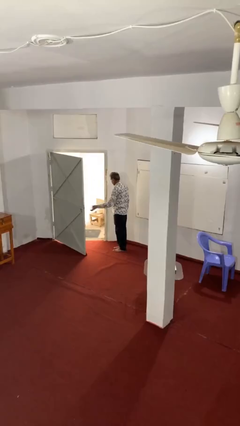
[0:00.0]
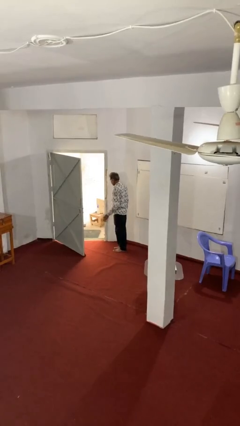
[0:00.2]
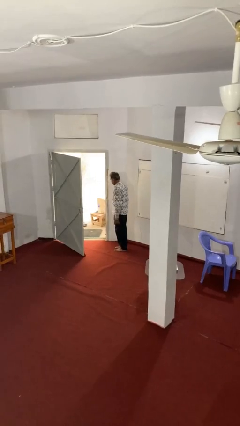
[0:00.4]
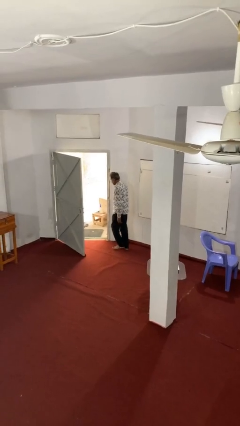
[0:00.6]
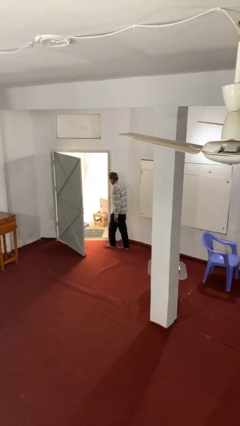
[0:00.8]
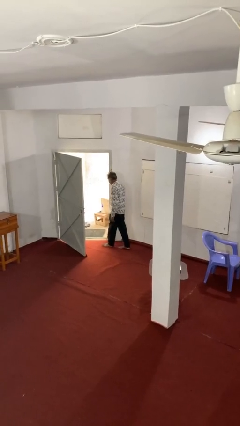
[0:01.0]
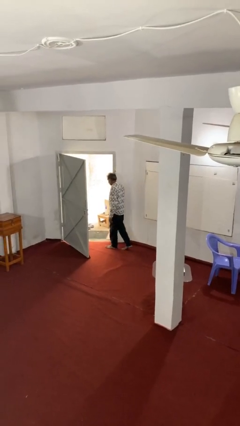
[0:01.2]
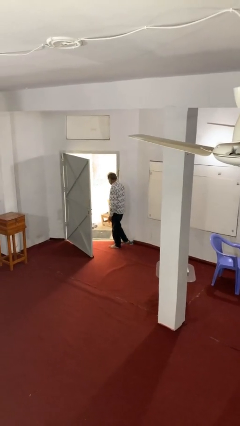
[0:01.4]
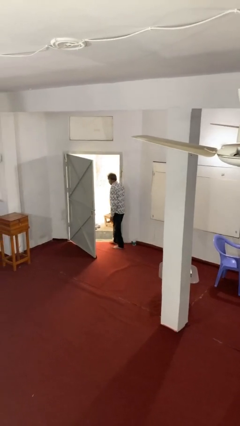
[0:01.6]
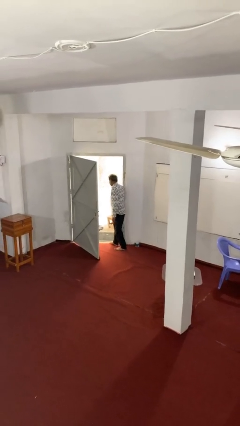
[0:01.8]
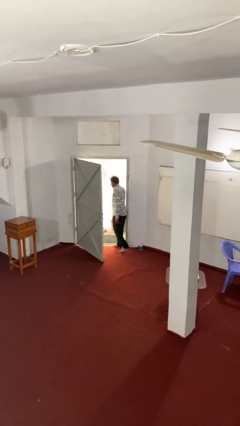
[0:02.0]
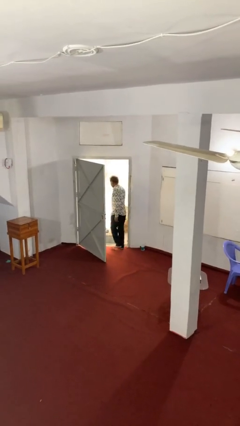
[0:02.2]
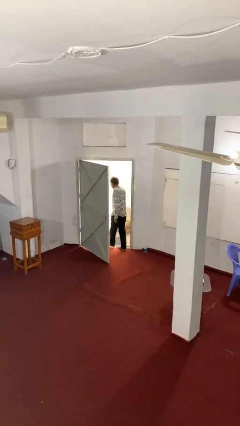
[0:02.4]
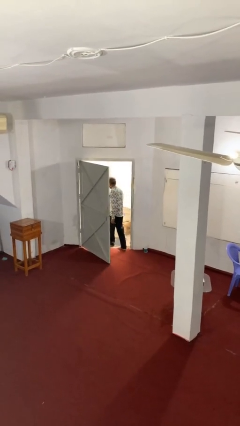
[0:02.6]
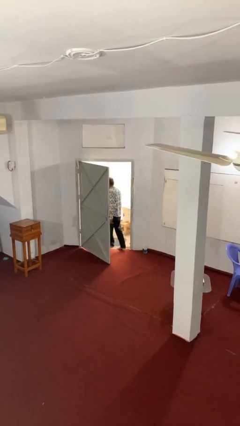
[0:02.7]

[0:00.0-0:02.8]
person exits scene through structure

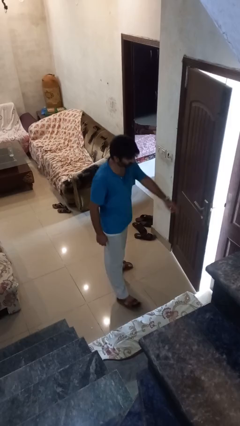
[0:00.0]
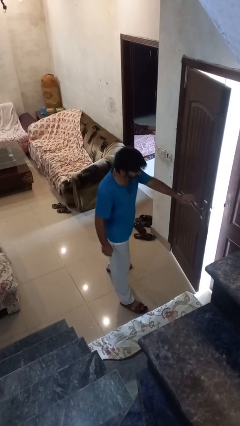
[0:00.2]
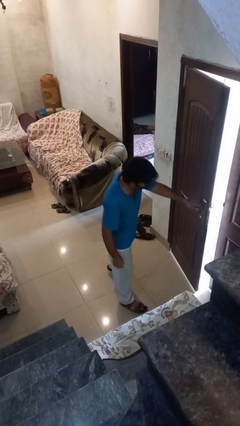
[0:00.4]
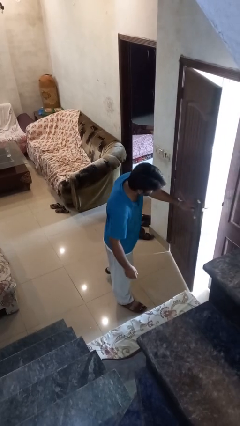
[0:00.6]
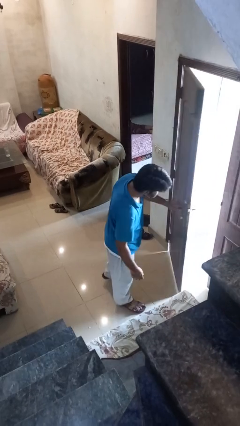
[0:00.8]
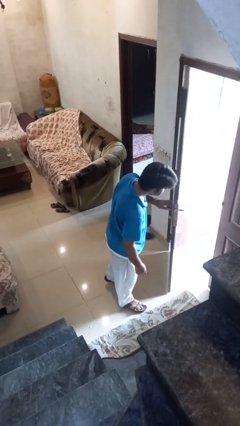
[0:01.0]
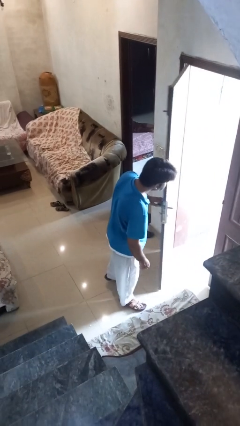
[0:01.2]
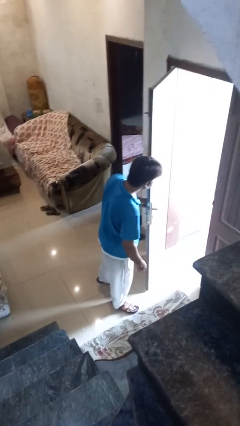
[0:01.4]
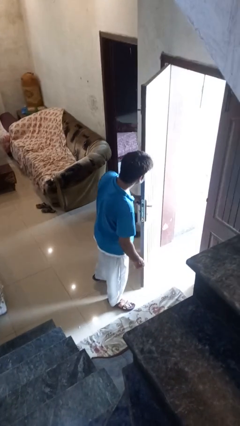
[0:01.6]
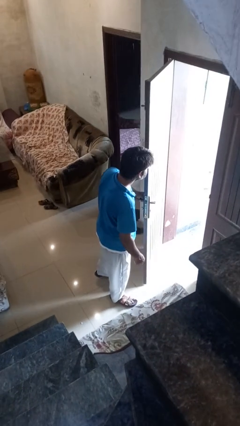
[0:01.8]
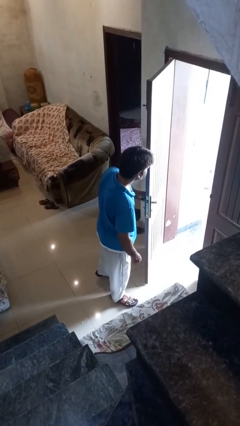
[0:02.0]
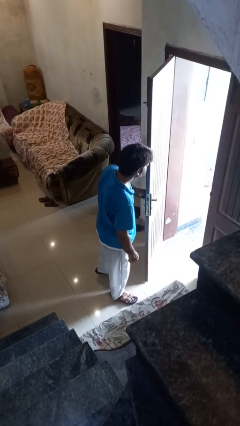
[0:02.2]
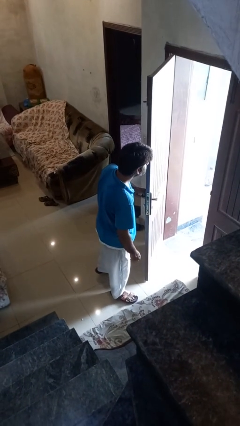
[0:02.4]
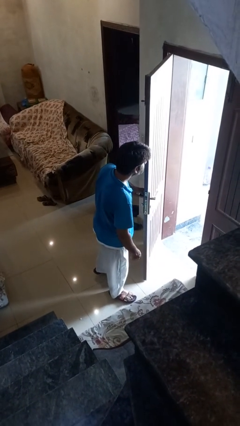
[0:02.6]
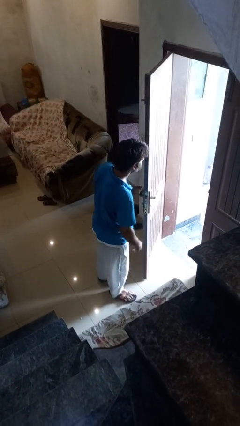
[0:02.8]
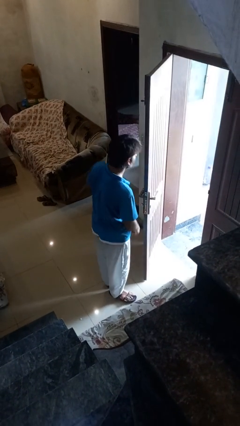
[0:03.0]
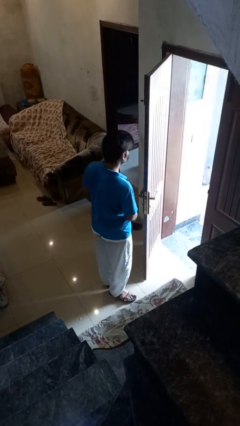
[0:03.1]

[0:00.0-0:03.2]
person opens facility door

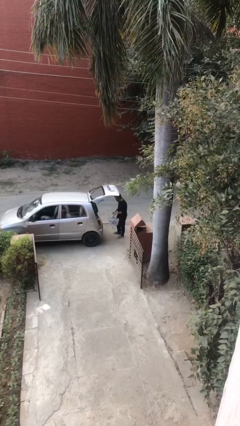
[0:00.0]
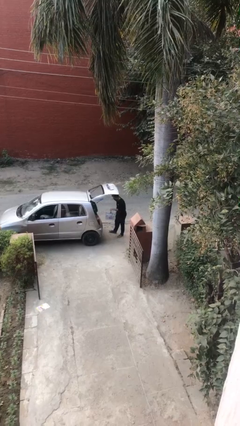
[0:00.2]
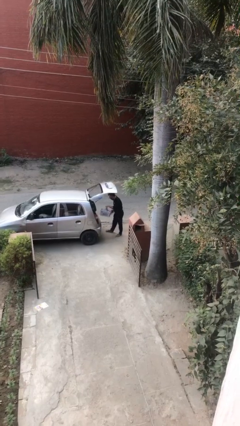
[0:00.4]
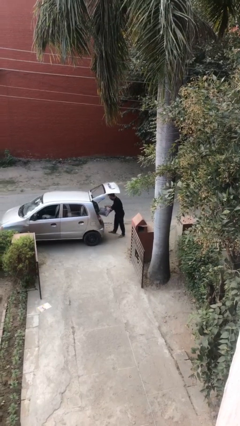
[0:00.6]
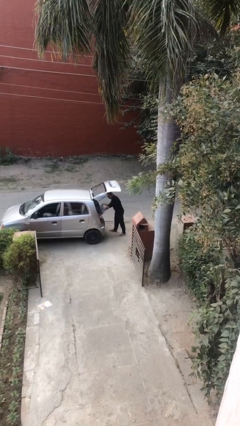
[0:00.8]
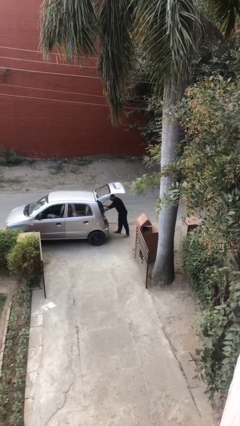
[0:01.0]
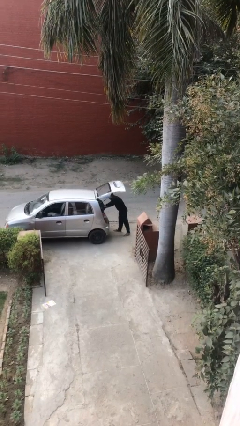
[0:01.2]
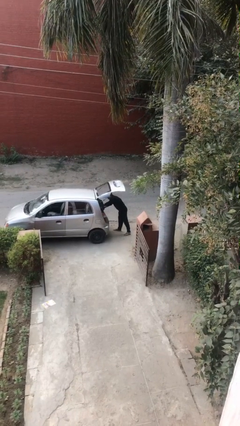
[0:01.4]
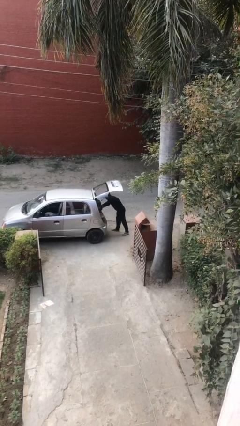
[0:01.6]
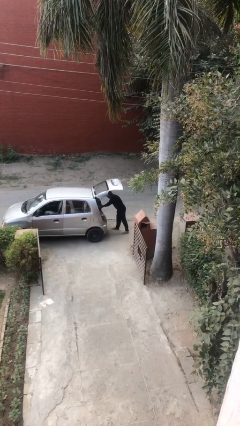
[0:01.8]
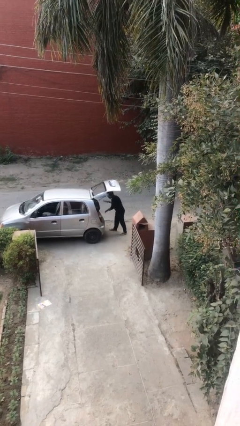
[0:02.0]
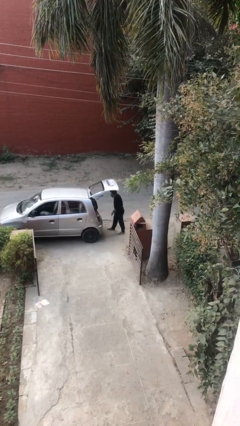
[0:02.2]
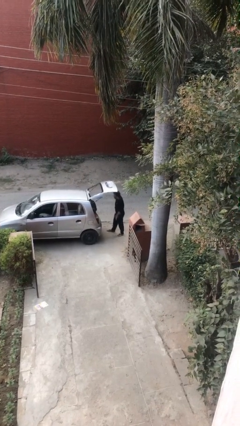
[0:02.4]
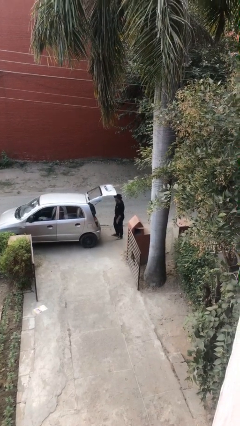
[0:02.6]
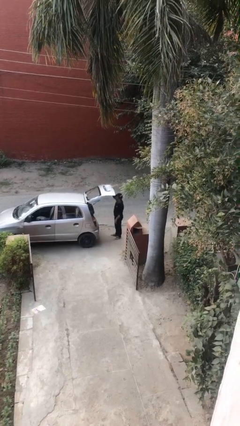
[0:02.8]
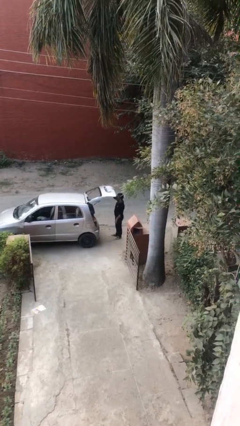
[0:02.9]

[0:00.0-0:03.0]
person loads car

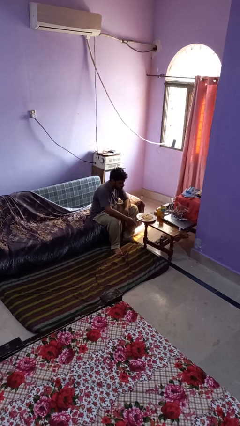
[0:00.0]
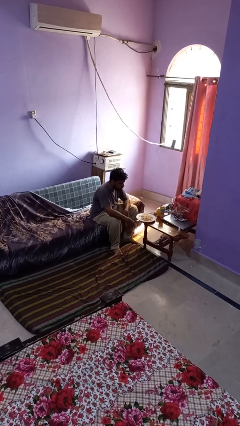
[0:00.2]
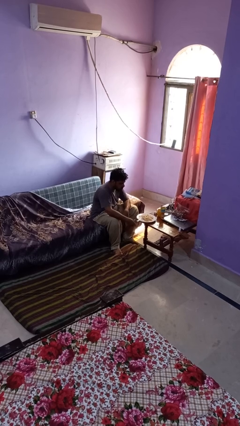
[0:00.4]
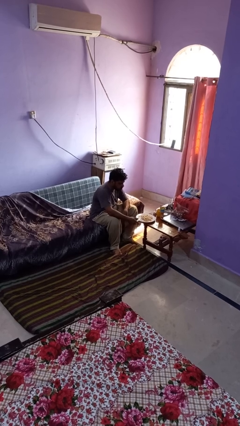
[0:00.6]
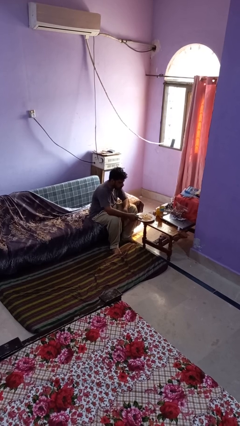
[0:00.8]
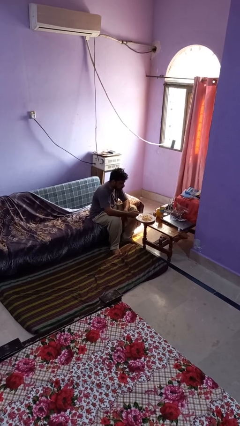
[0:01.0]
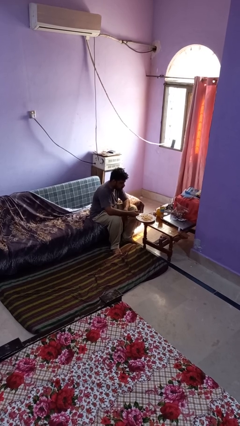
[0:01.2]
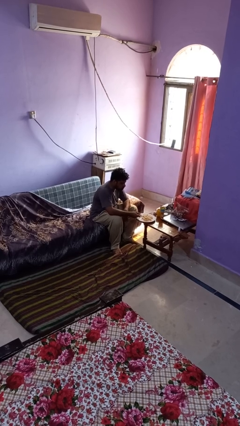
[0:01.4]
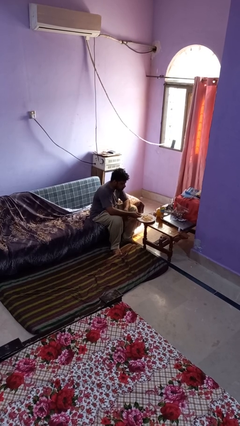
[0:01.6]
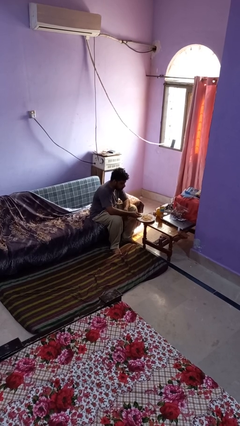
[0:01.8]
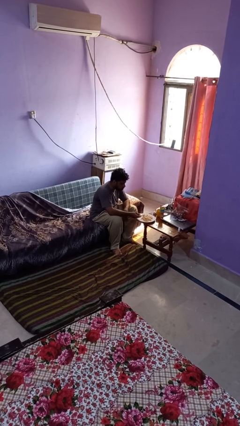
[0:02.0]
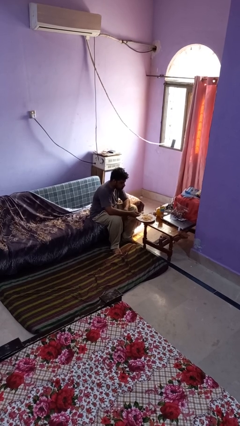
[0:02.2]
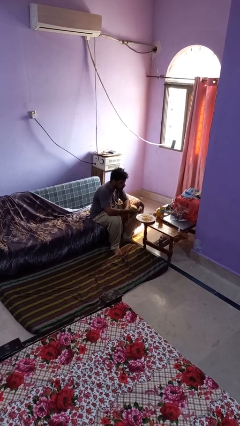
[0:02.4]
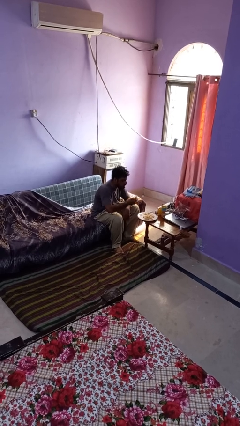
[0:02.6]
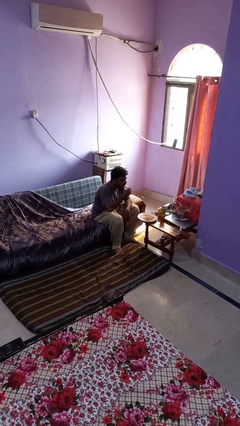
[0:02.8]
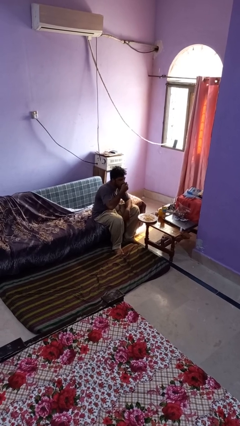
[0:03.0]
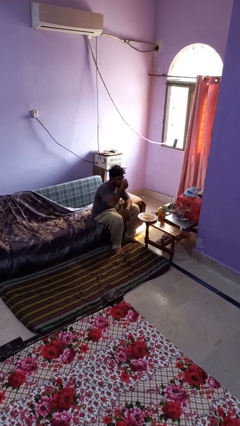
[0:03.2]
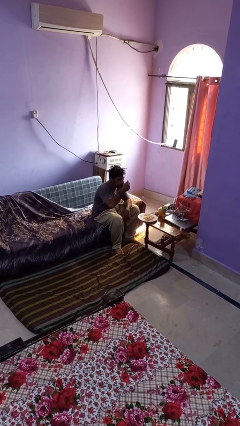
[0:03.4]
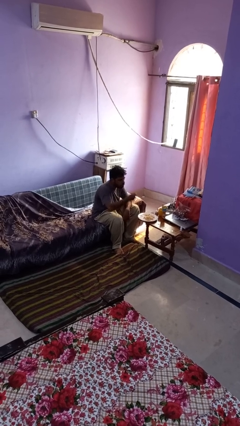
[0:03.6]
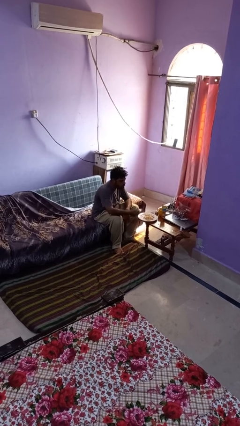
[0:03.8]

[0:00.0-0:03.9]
person eats with utensil

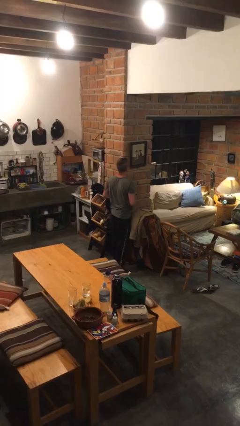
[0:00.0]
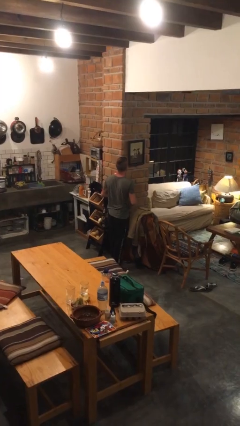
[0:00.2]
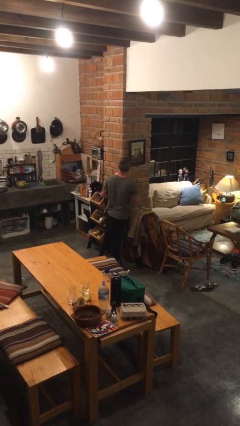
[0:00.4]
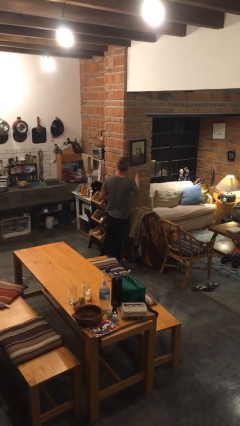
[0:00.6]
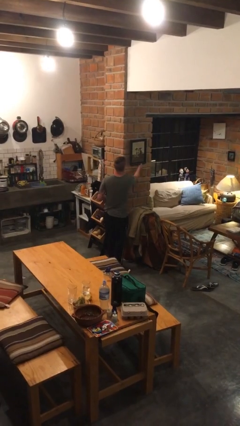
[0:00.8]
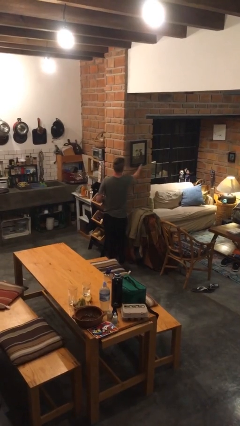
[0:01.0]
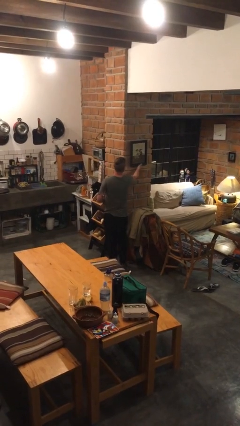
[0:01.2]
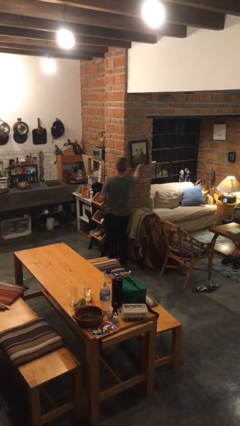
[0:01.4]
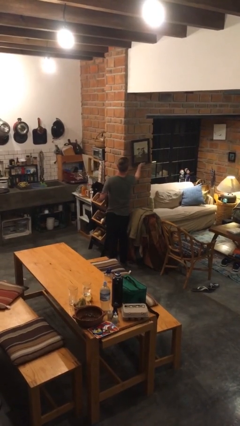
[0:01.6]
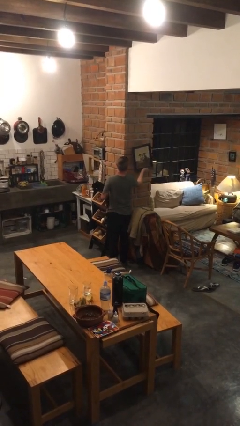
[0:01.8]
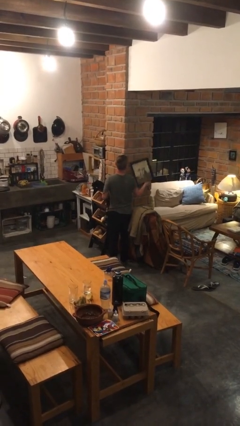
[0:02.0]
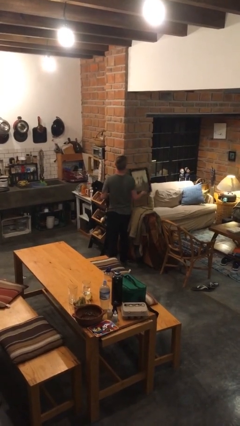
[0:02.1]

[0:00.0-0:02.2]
person takes down picture frame

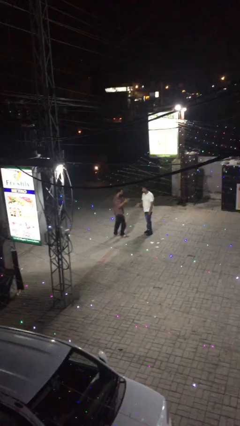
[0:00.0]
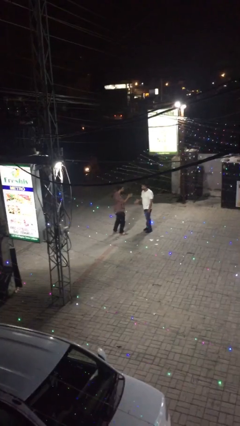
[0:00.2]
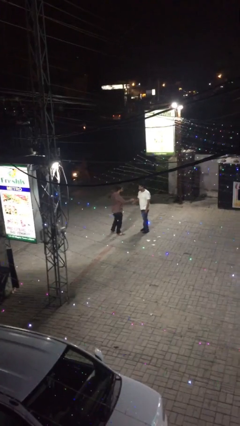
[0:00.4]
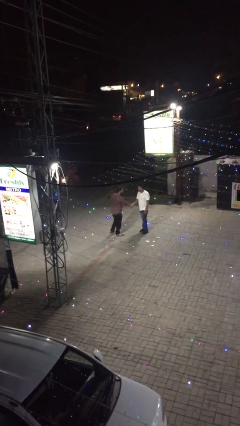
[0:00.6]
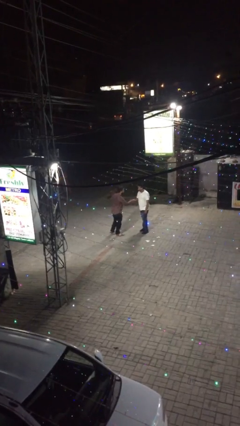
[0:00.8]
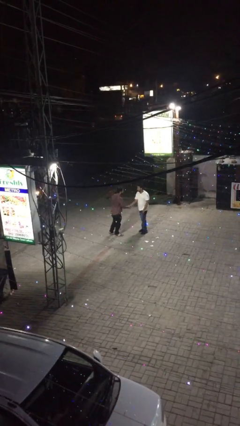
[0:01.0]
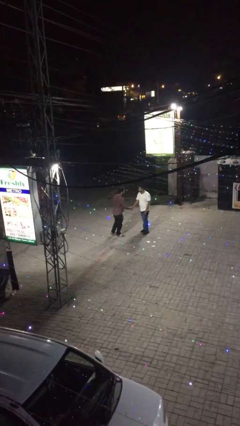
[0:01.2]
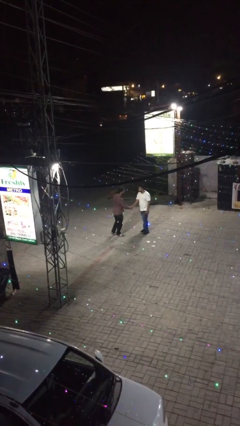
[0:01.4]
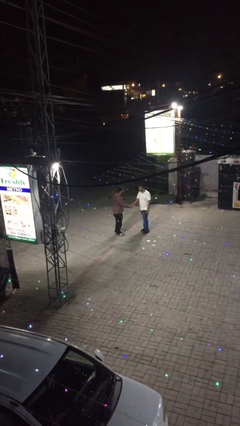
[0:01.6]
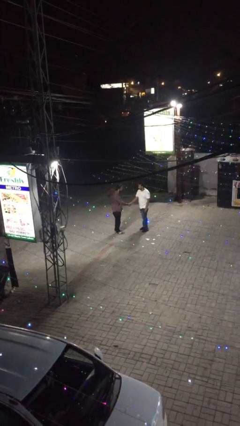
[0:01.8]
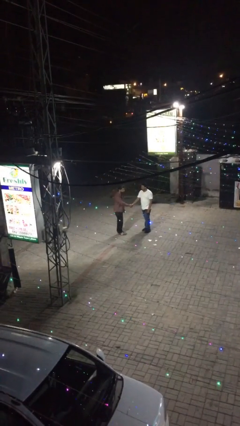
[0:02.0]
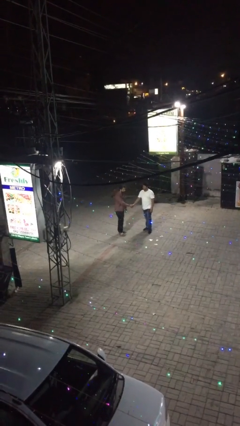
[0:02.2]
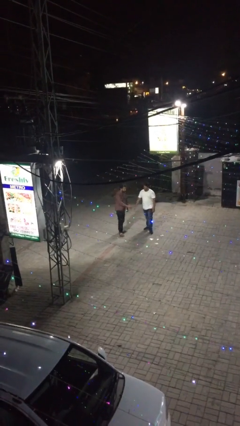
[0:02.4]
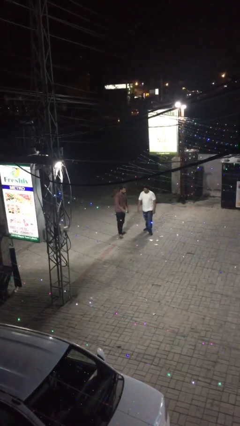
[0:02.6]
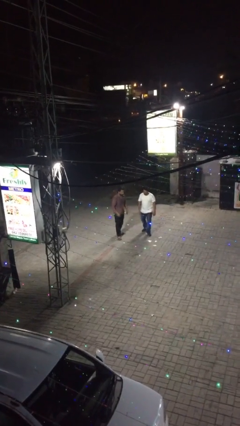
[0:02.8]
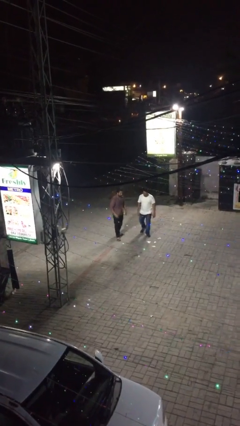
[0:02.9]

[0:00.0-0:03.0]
person shakes hand
